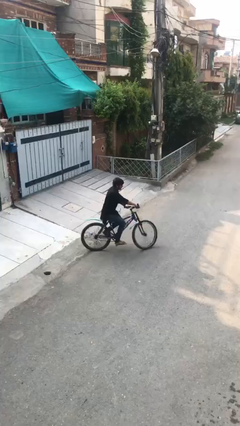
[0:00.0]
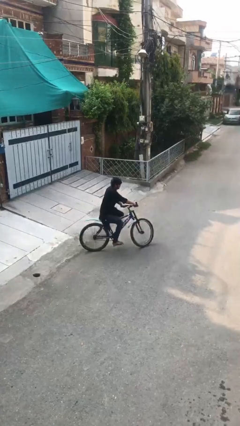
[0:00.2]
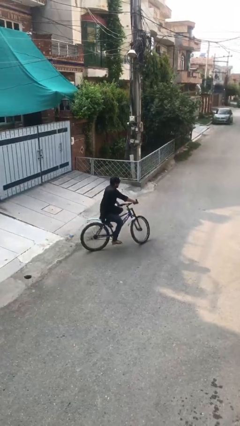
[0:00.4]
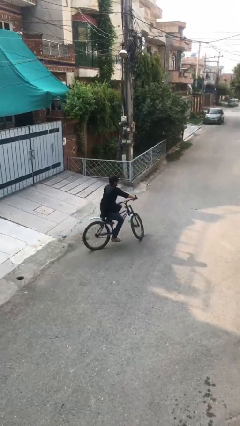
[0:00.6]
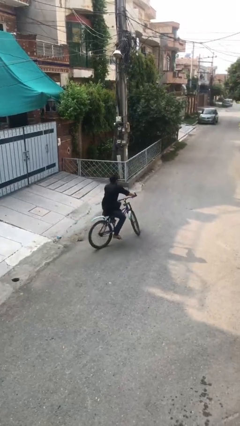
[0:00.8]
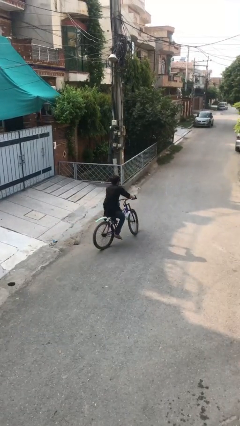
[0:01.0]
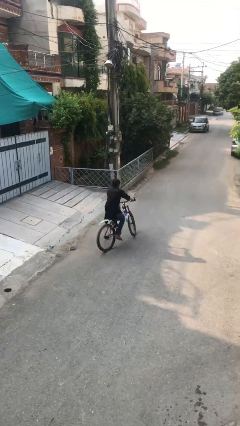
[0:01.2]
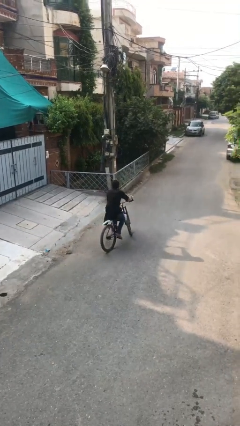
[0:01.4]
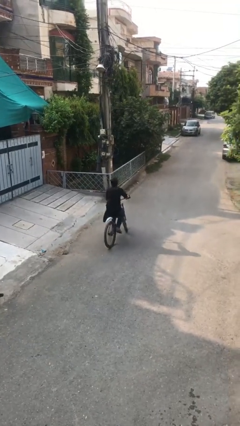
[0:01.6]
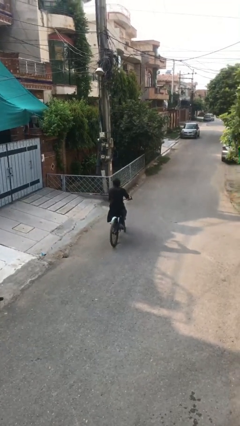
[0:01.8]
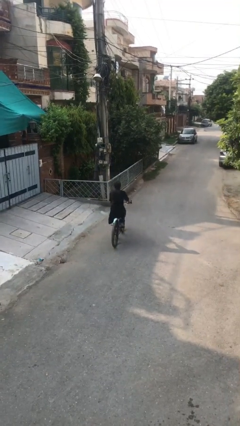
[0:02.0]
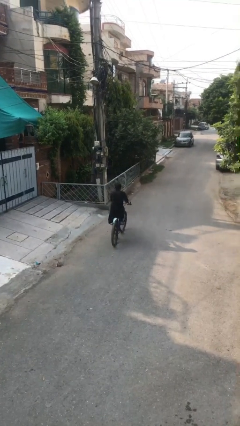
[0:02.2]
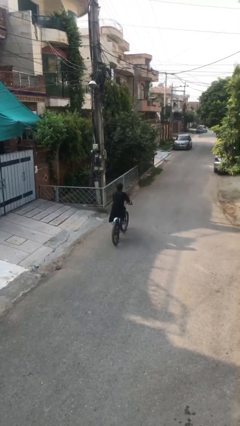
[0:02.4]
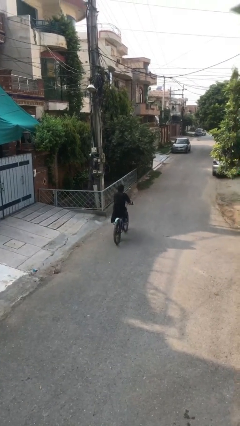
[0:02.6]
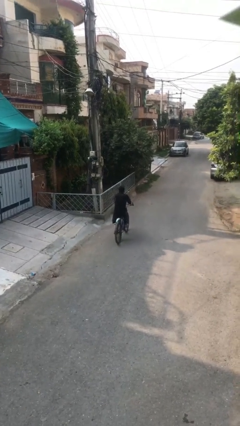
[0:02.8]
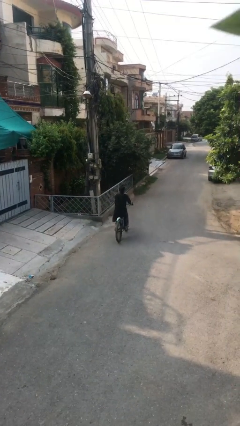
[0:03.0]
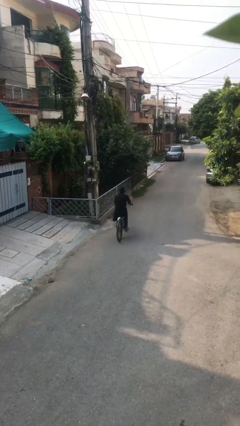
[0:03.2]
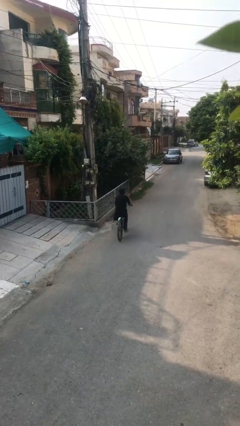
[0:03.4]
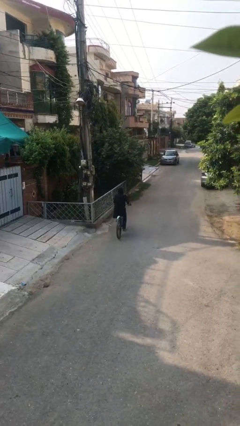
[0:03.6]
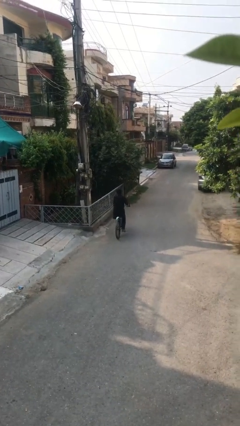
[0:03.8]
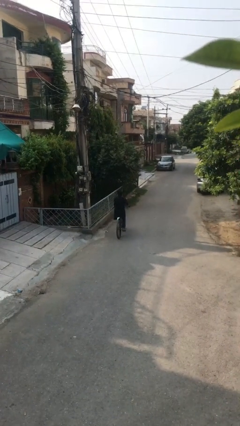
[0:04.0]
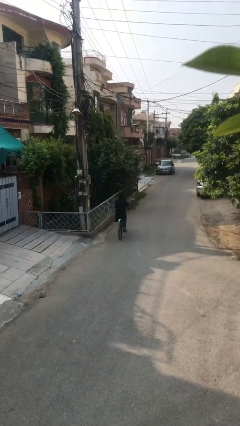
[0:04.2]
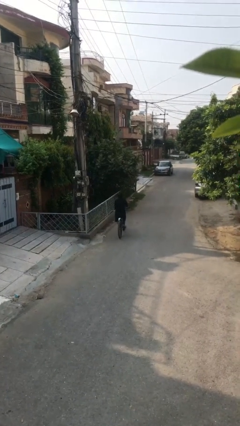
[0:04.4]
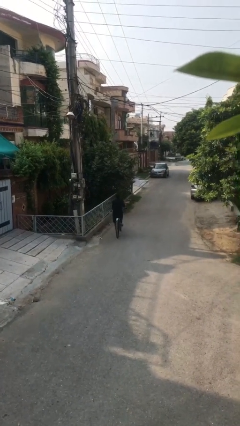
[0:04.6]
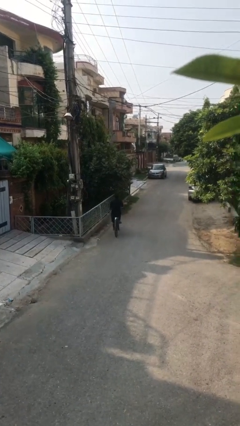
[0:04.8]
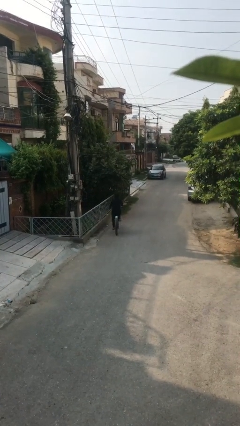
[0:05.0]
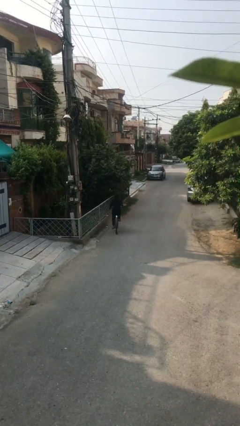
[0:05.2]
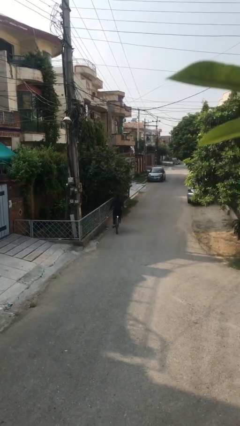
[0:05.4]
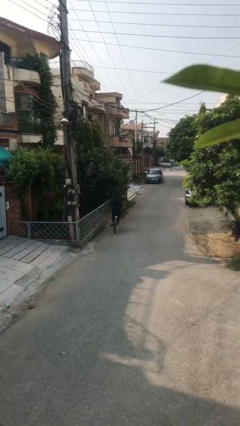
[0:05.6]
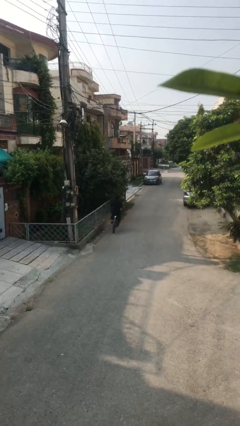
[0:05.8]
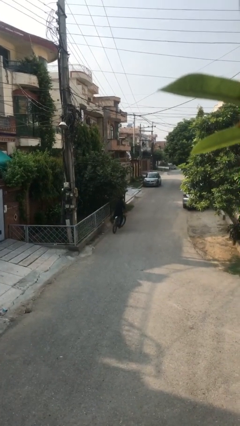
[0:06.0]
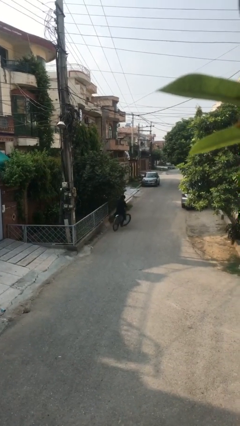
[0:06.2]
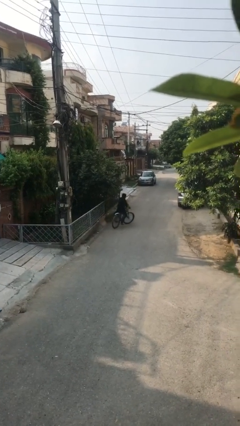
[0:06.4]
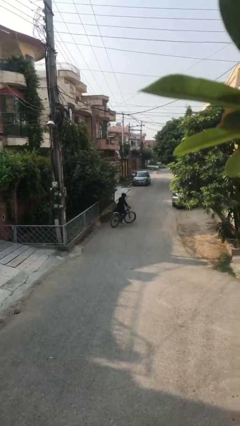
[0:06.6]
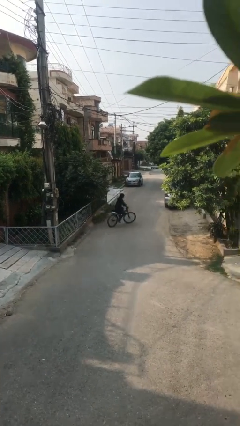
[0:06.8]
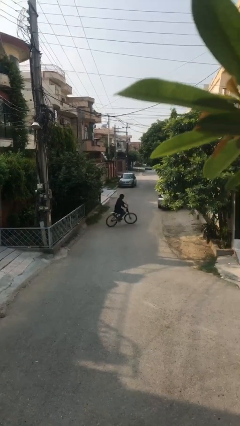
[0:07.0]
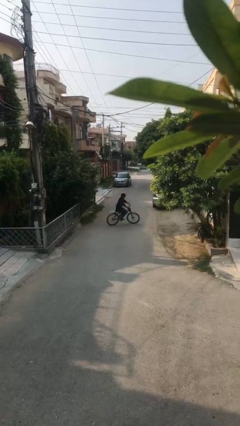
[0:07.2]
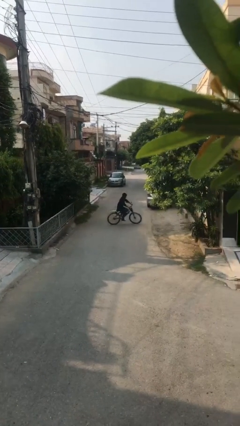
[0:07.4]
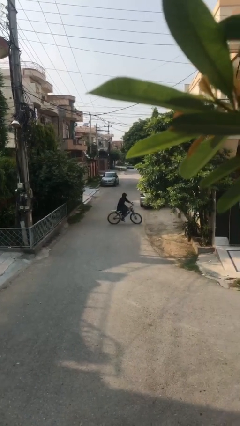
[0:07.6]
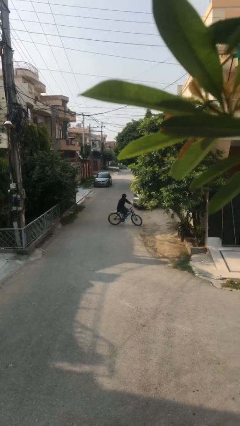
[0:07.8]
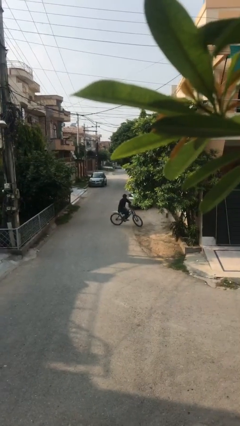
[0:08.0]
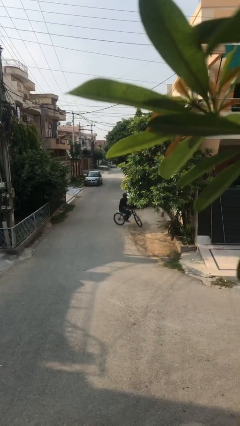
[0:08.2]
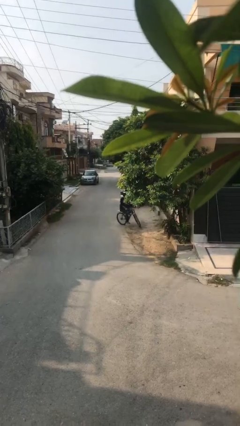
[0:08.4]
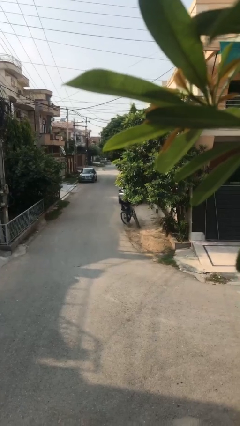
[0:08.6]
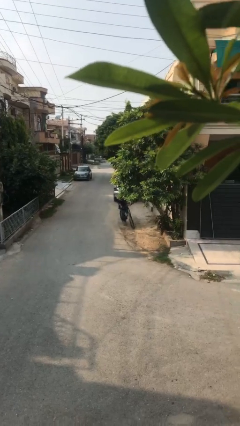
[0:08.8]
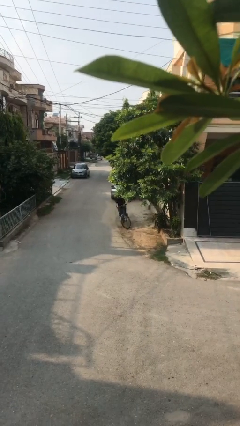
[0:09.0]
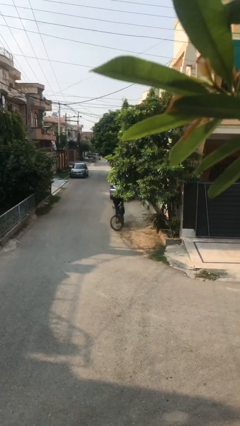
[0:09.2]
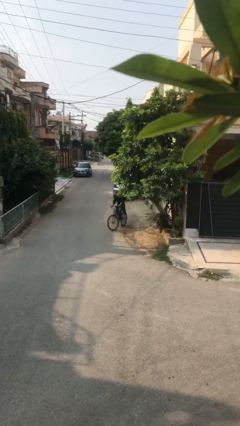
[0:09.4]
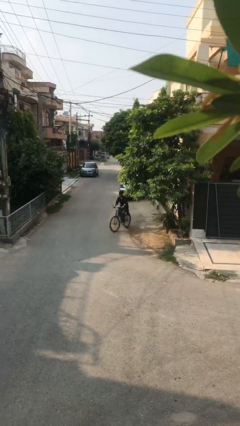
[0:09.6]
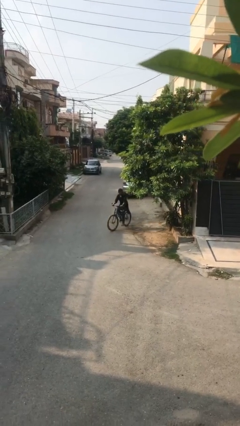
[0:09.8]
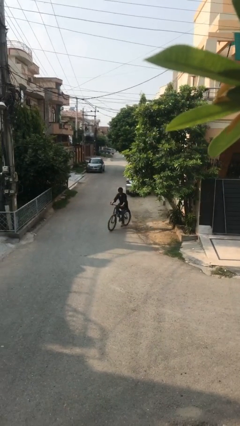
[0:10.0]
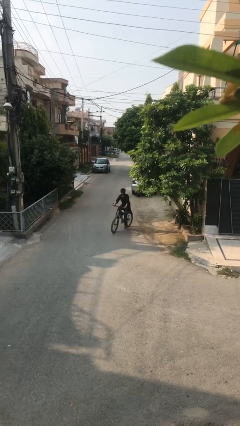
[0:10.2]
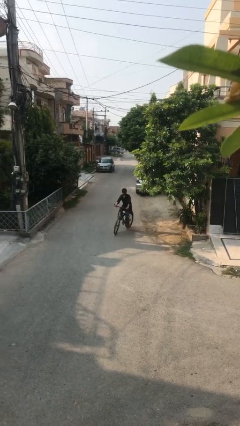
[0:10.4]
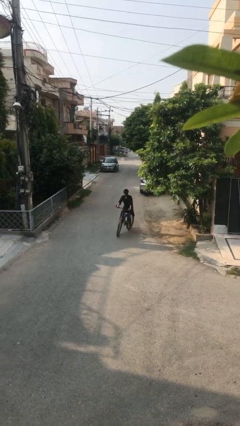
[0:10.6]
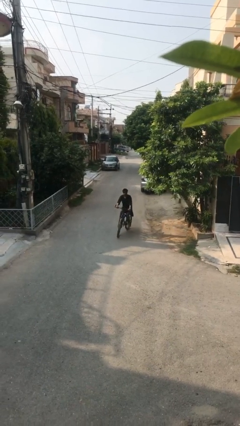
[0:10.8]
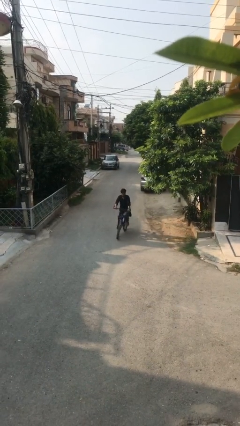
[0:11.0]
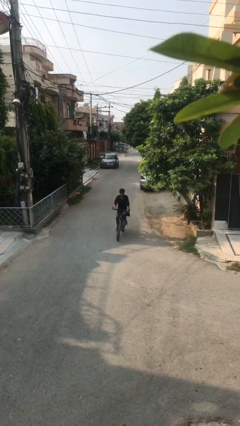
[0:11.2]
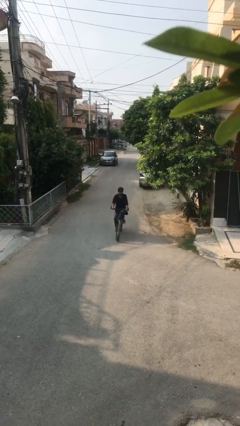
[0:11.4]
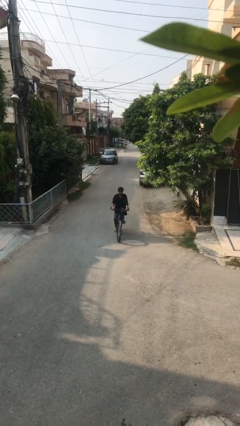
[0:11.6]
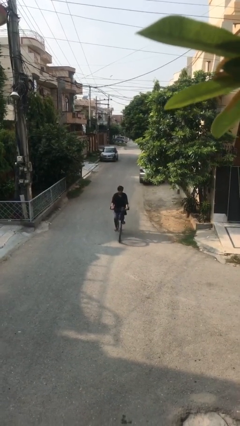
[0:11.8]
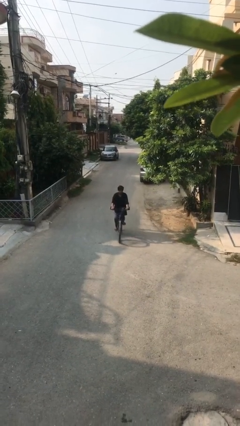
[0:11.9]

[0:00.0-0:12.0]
person rides bicycle

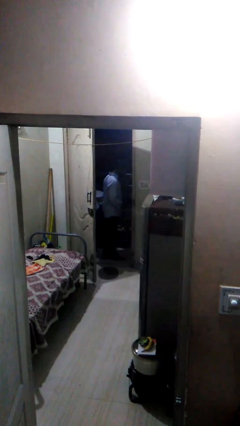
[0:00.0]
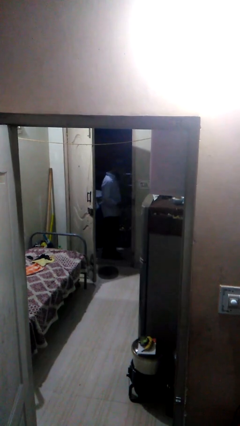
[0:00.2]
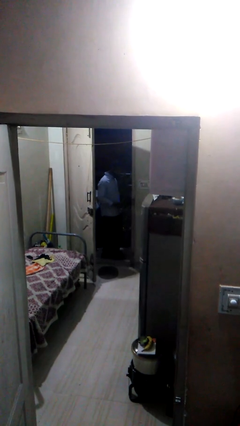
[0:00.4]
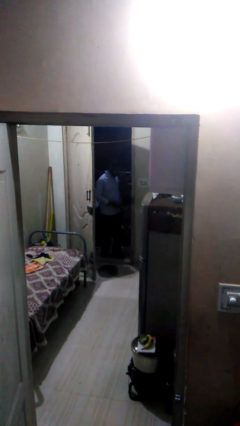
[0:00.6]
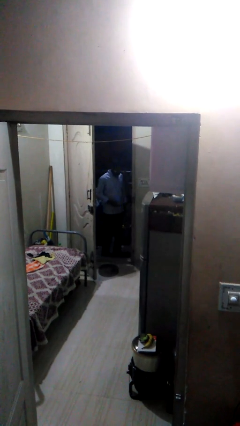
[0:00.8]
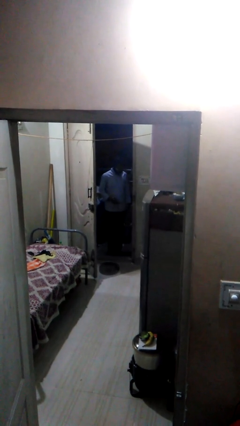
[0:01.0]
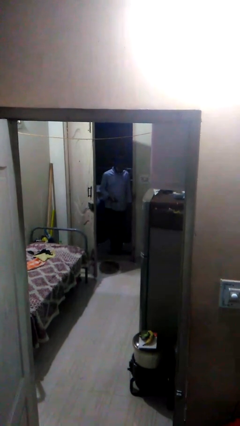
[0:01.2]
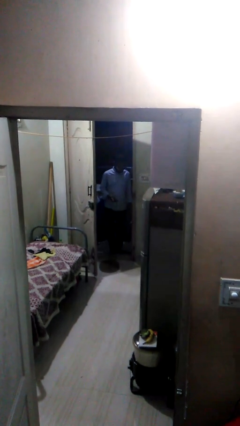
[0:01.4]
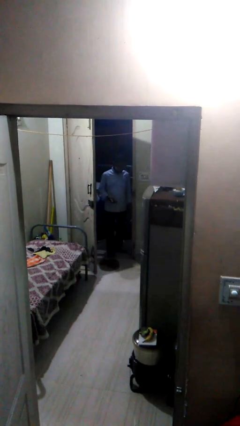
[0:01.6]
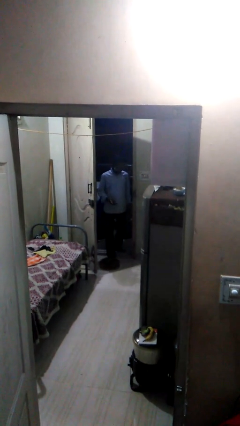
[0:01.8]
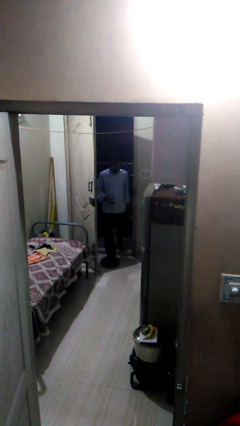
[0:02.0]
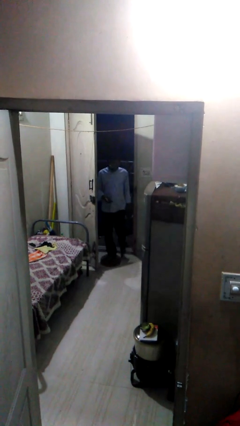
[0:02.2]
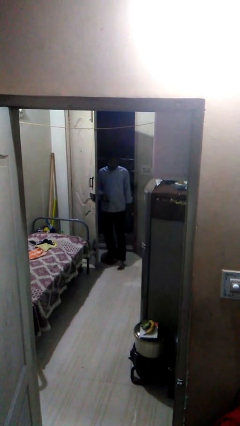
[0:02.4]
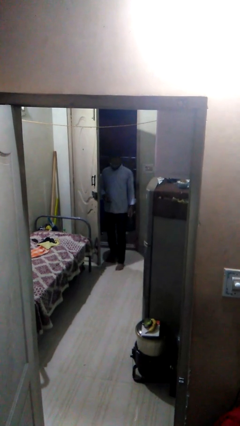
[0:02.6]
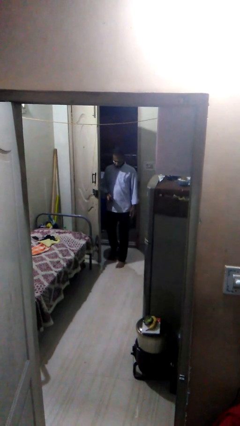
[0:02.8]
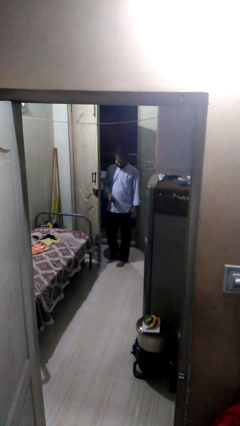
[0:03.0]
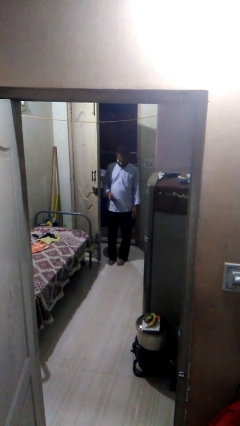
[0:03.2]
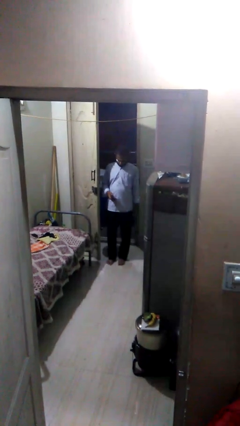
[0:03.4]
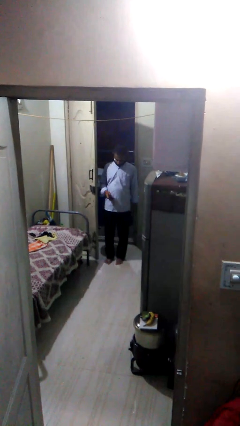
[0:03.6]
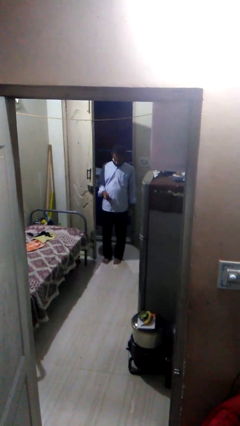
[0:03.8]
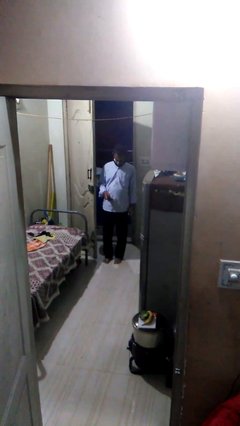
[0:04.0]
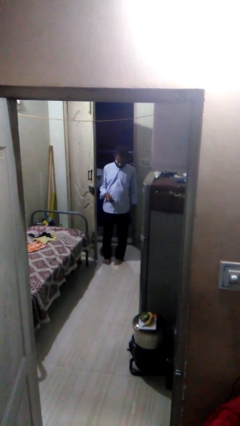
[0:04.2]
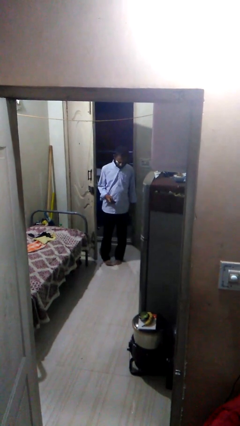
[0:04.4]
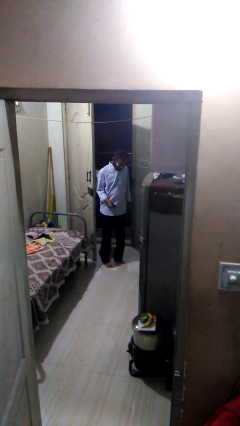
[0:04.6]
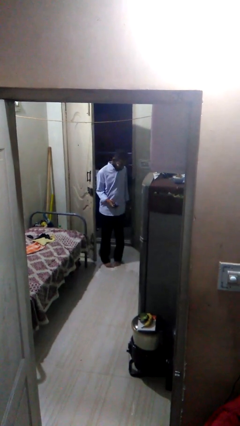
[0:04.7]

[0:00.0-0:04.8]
person enters scene through structure

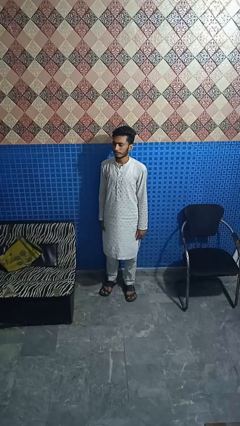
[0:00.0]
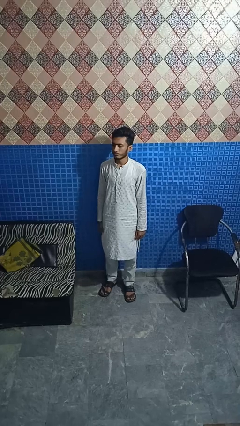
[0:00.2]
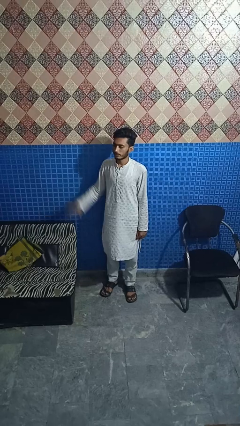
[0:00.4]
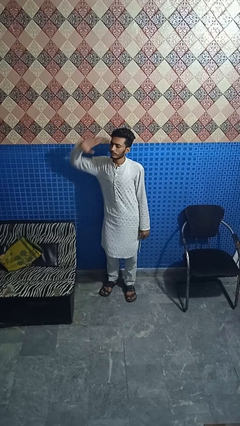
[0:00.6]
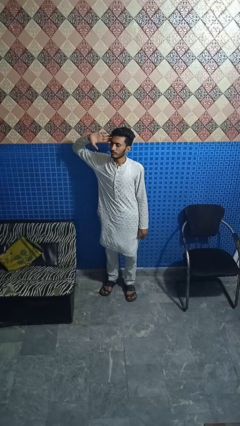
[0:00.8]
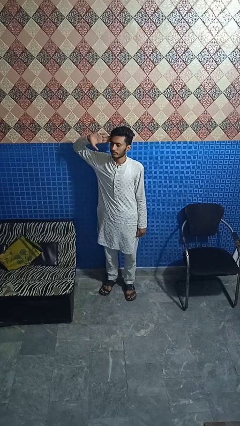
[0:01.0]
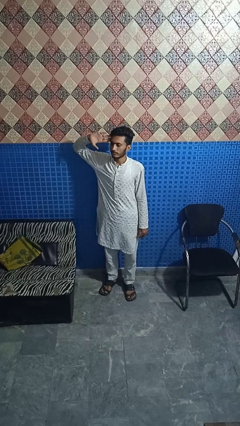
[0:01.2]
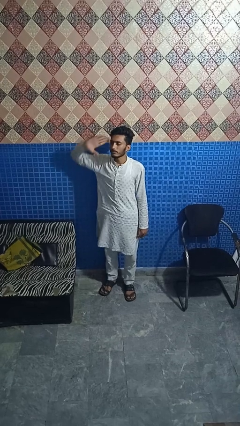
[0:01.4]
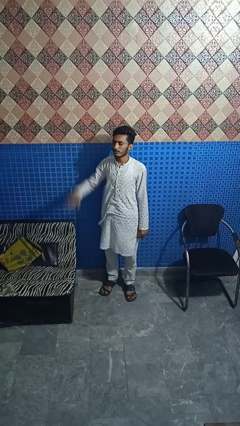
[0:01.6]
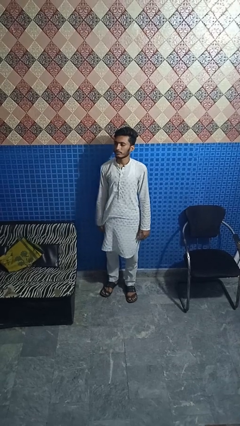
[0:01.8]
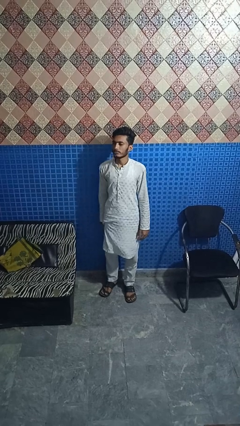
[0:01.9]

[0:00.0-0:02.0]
person salutes
